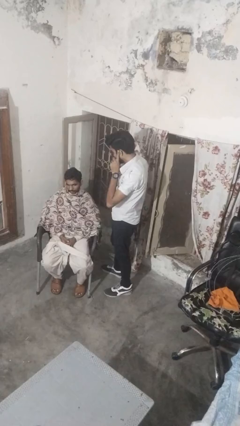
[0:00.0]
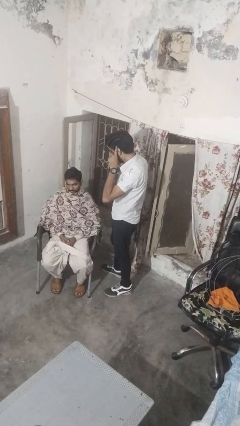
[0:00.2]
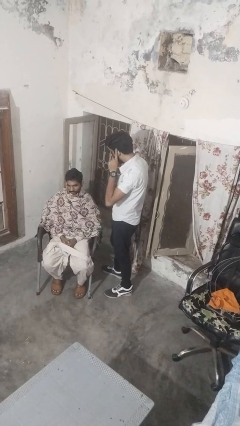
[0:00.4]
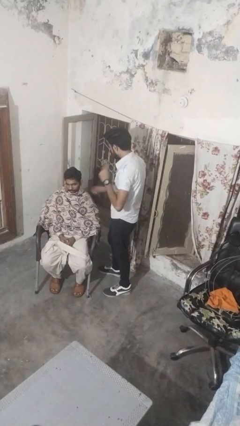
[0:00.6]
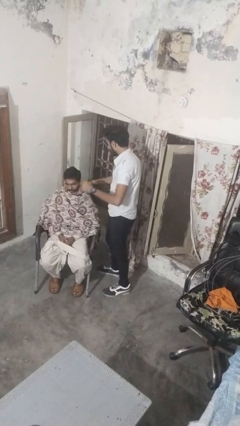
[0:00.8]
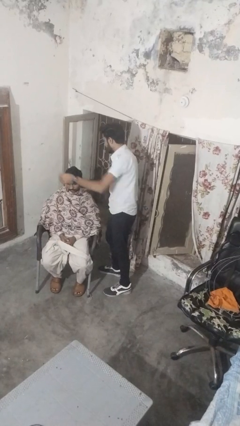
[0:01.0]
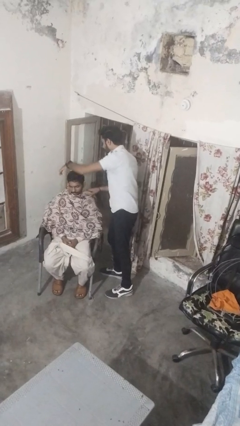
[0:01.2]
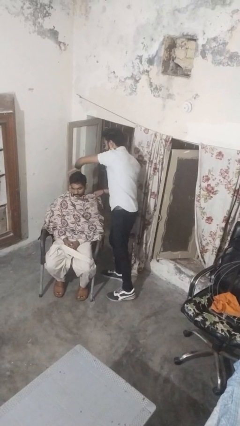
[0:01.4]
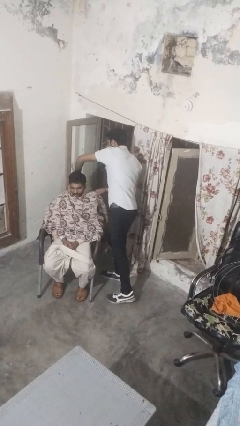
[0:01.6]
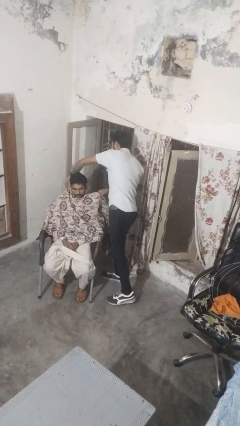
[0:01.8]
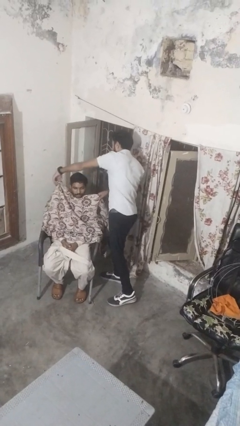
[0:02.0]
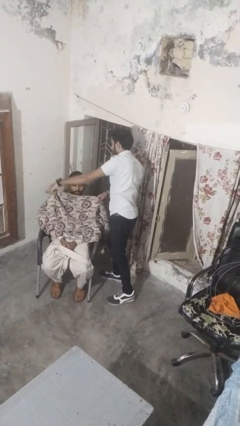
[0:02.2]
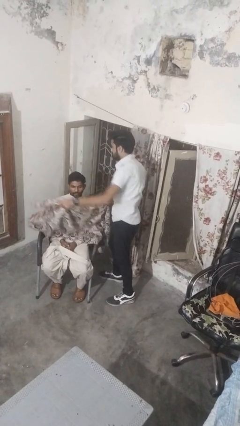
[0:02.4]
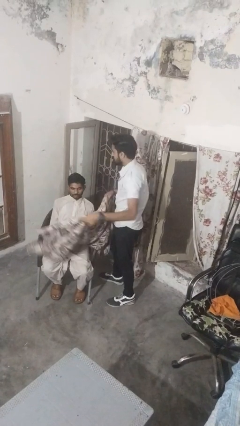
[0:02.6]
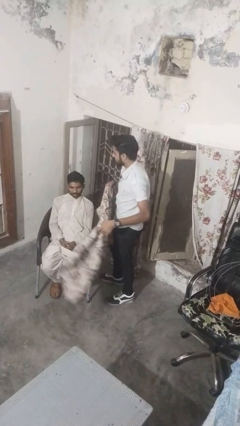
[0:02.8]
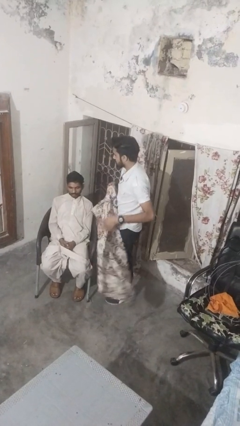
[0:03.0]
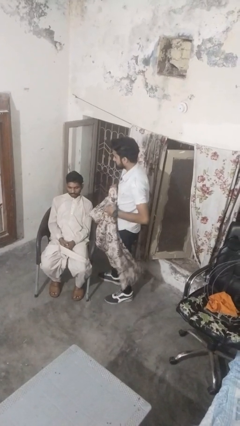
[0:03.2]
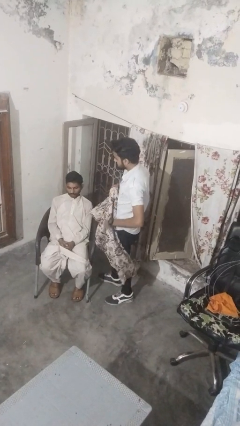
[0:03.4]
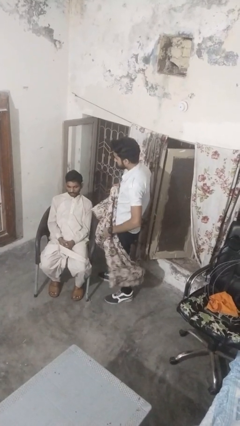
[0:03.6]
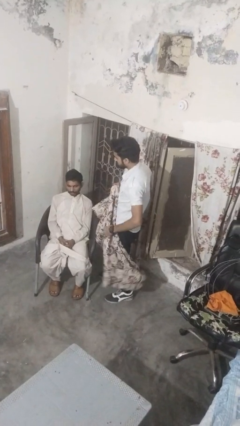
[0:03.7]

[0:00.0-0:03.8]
person uncovers friend with blanket

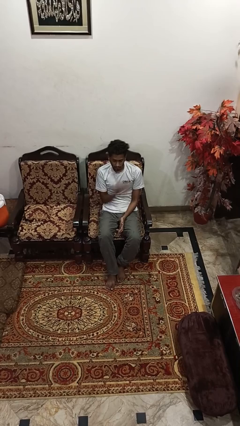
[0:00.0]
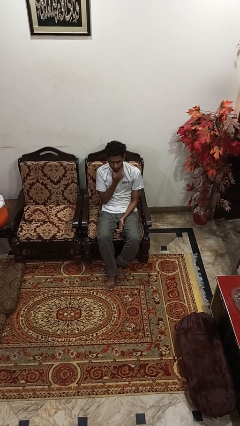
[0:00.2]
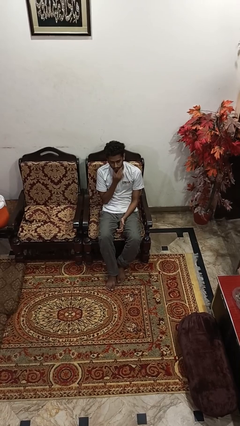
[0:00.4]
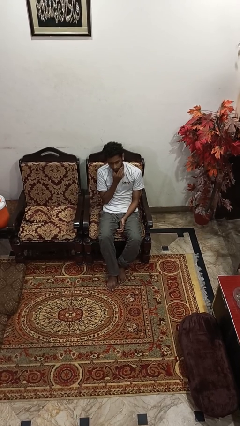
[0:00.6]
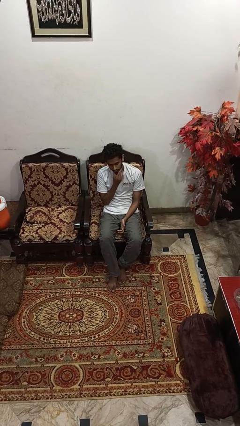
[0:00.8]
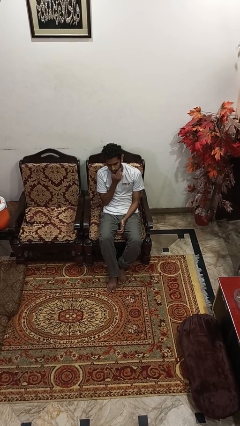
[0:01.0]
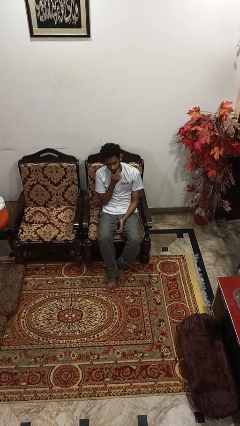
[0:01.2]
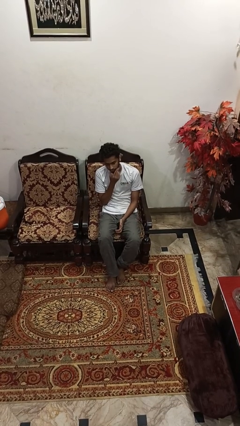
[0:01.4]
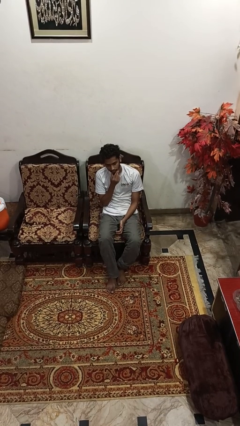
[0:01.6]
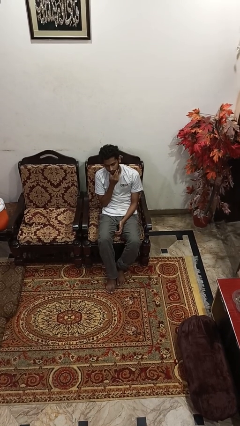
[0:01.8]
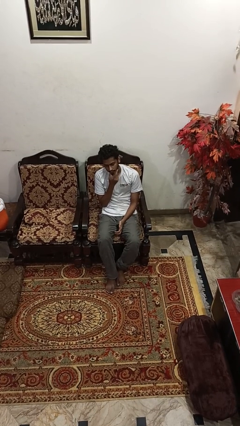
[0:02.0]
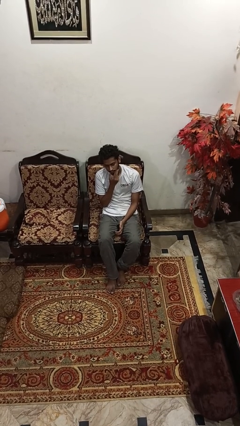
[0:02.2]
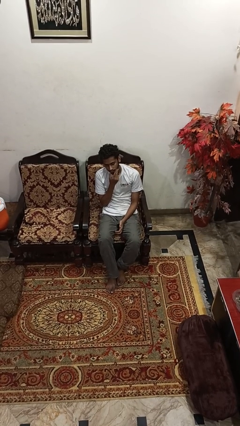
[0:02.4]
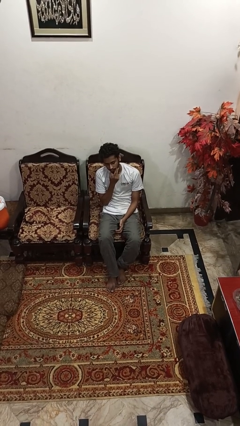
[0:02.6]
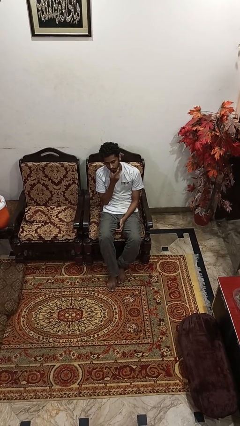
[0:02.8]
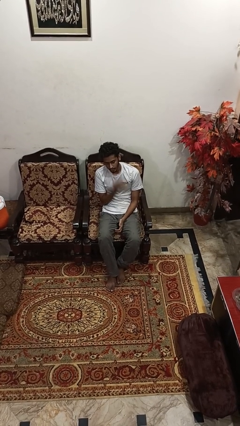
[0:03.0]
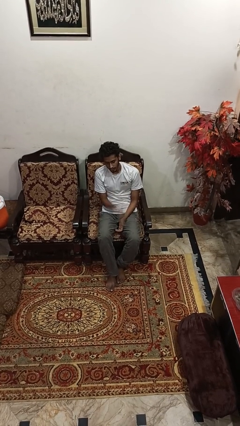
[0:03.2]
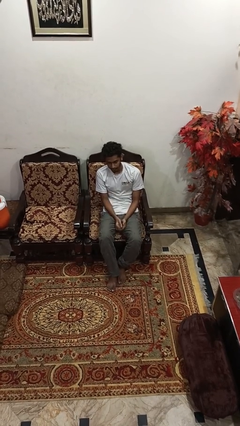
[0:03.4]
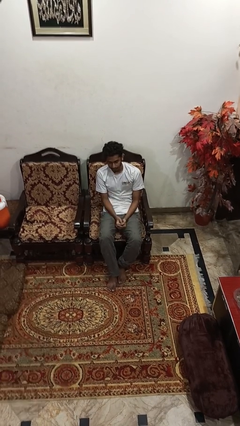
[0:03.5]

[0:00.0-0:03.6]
person strokes chin

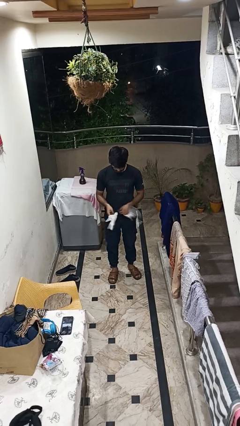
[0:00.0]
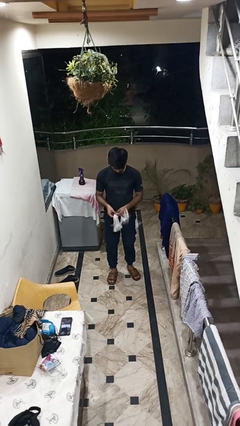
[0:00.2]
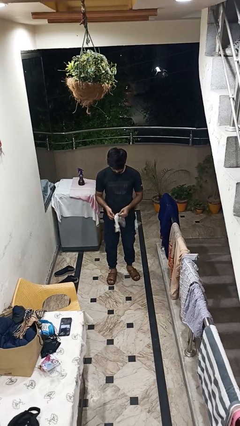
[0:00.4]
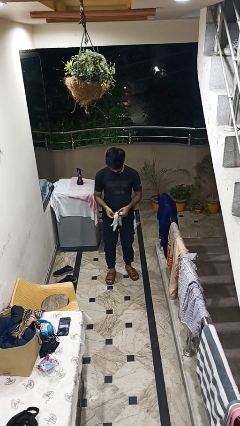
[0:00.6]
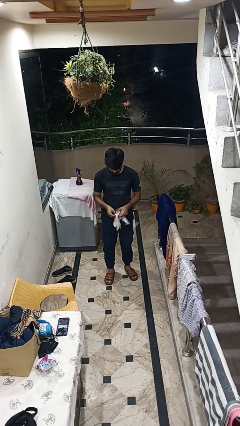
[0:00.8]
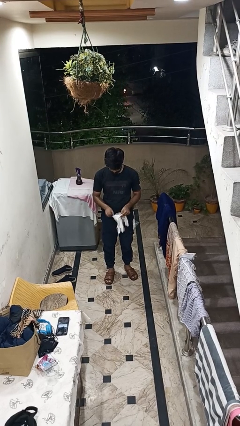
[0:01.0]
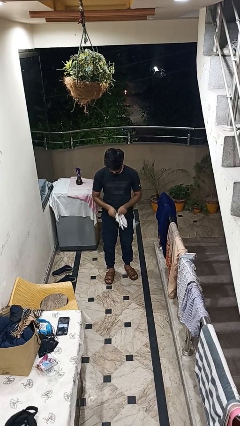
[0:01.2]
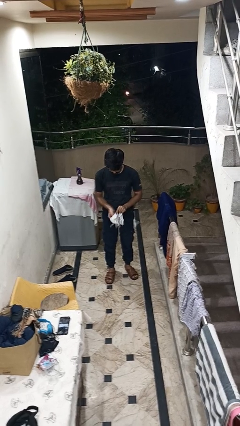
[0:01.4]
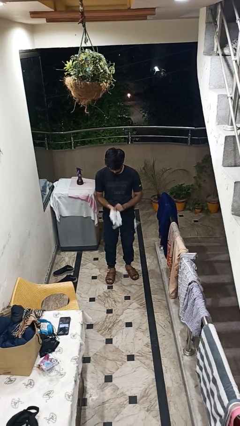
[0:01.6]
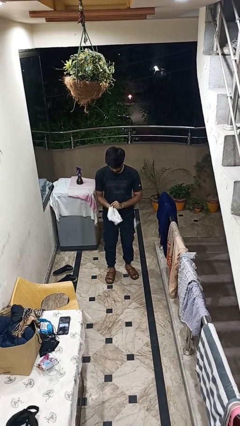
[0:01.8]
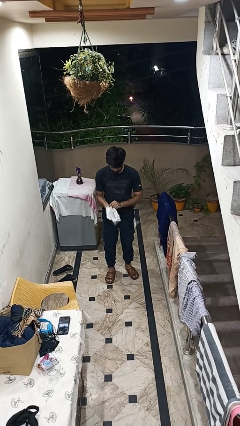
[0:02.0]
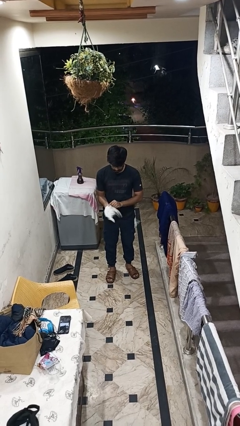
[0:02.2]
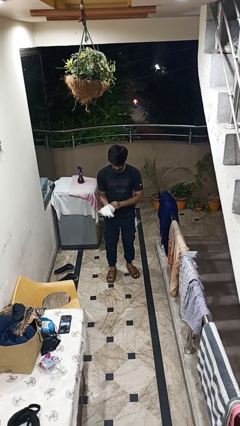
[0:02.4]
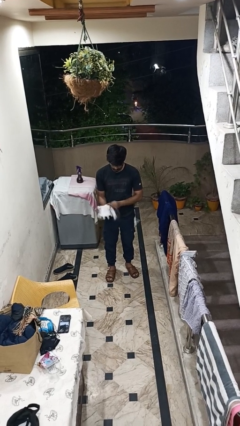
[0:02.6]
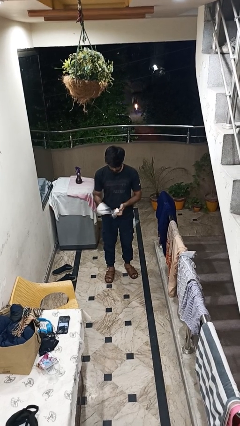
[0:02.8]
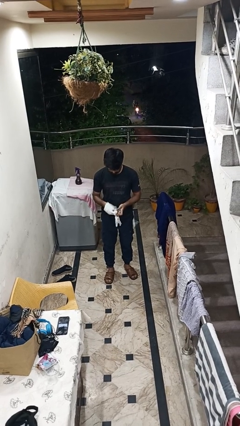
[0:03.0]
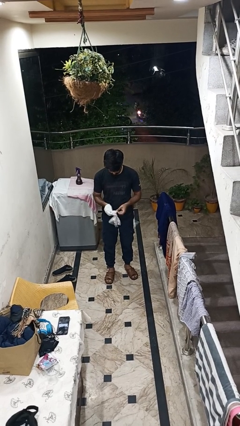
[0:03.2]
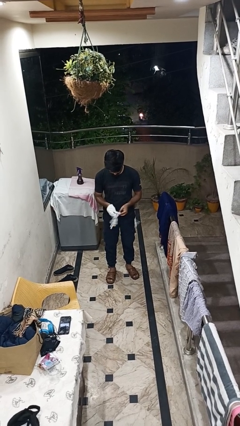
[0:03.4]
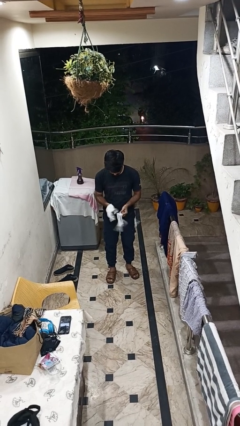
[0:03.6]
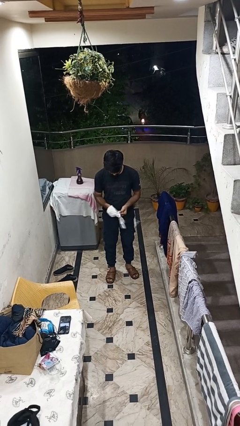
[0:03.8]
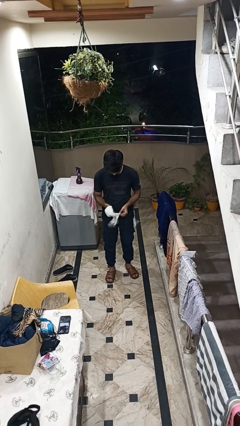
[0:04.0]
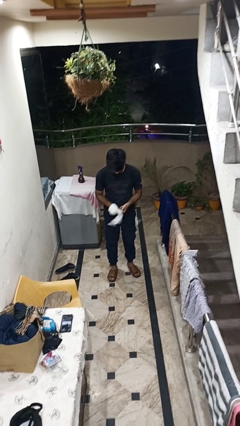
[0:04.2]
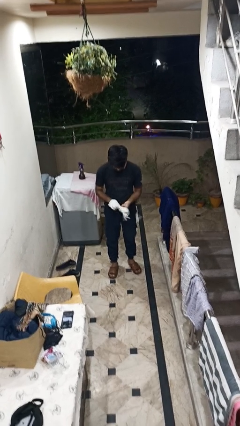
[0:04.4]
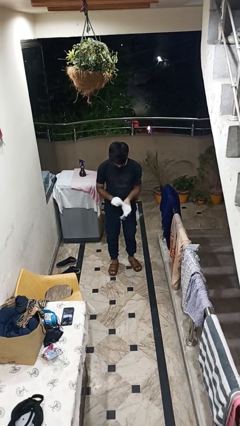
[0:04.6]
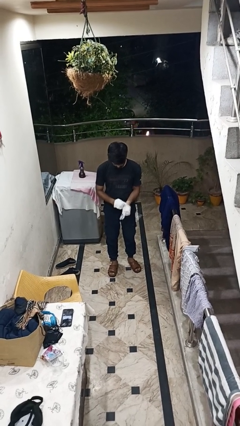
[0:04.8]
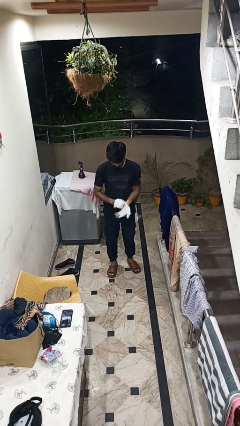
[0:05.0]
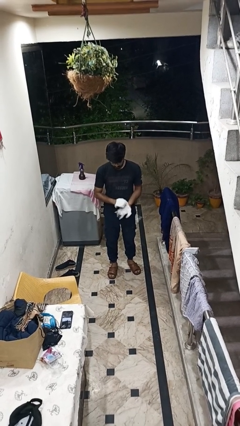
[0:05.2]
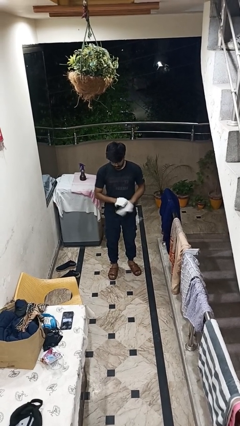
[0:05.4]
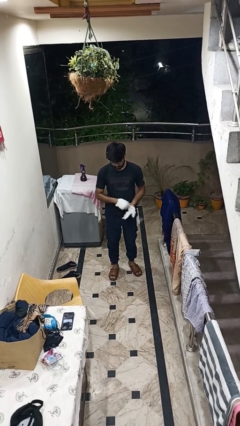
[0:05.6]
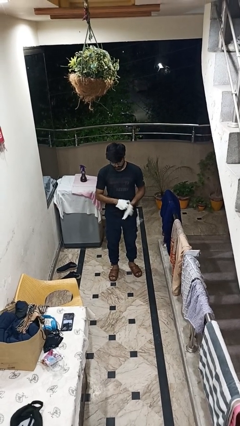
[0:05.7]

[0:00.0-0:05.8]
person puts on gloves

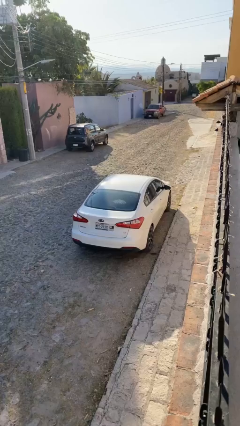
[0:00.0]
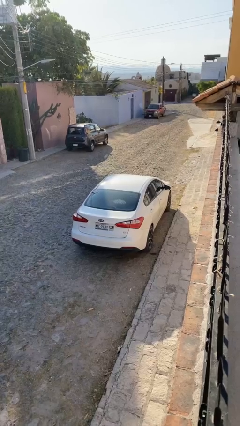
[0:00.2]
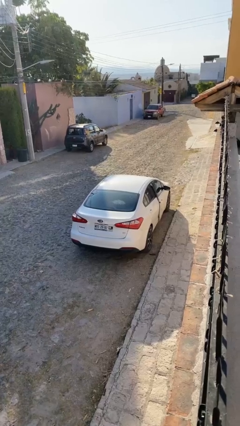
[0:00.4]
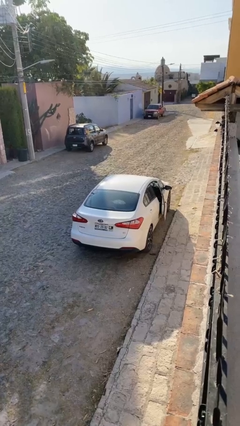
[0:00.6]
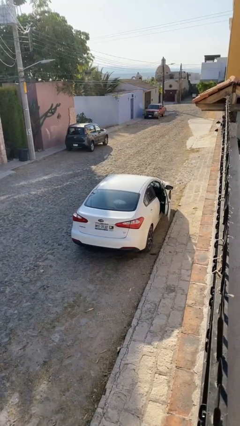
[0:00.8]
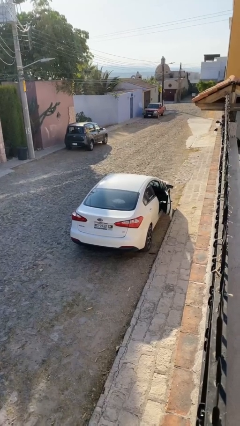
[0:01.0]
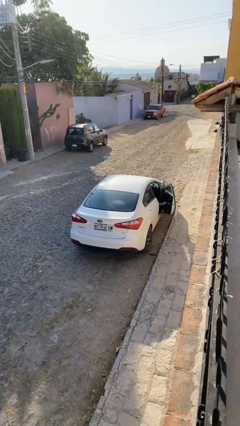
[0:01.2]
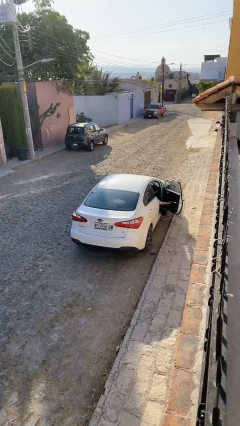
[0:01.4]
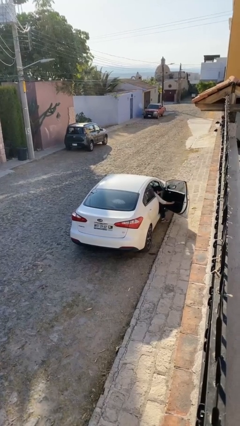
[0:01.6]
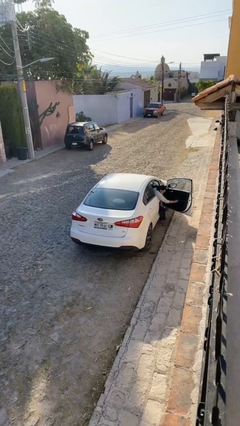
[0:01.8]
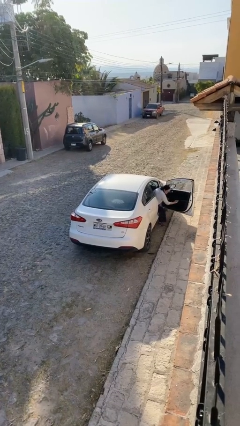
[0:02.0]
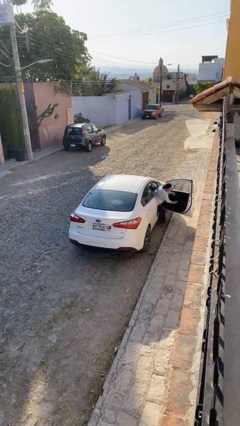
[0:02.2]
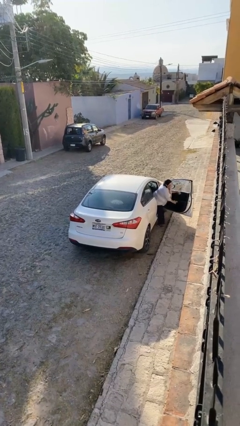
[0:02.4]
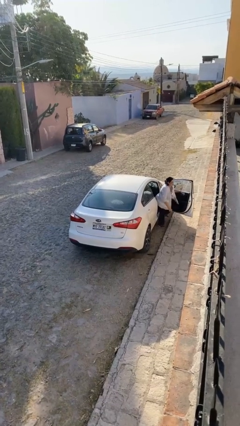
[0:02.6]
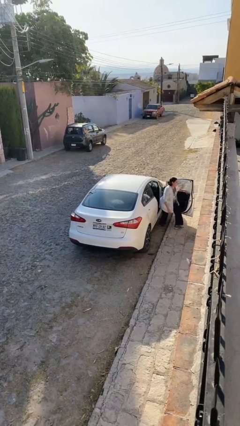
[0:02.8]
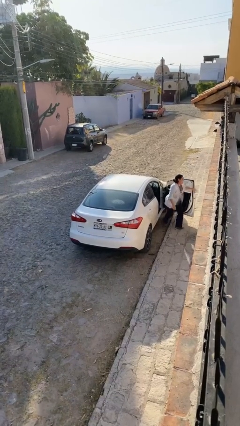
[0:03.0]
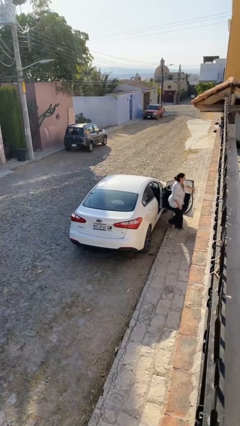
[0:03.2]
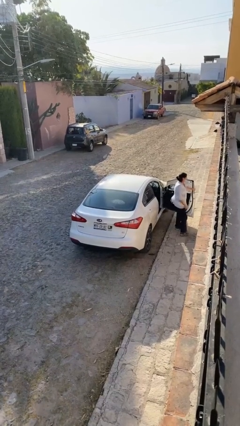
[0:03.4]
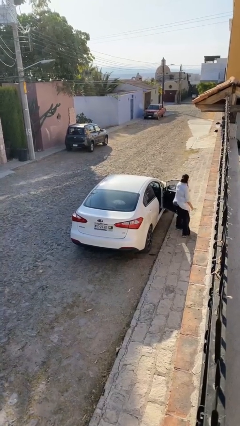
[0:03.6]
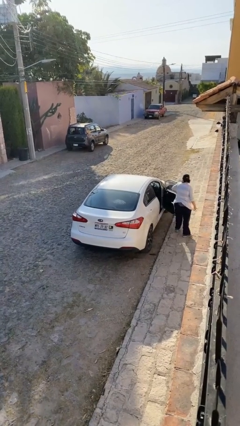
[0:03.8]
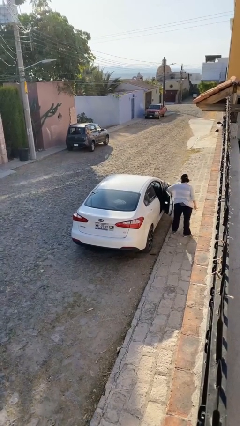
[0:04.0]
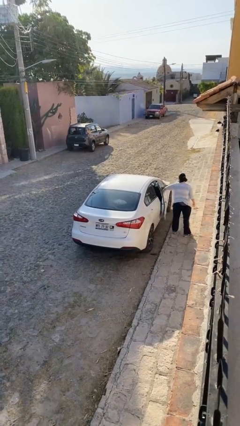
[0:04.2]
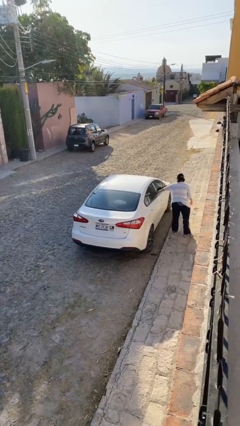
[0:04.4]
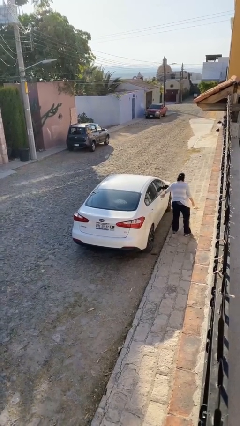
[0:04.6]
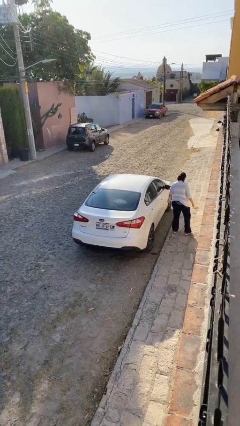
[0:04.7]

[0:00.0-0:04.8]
car drops off person
